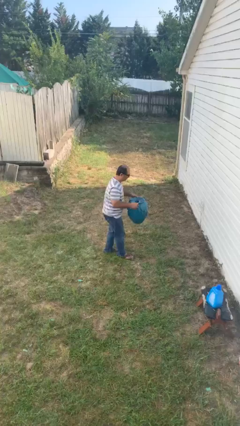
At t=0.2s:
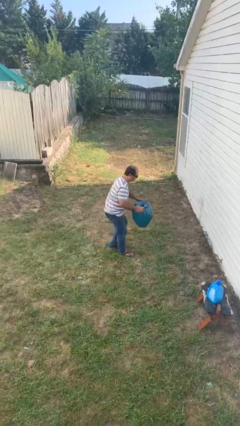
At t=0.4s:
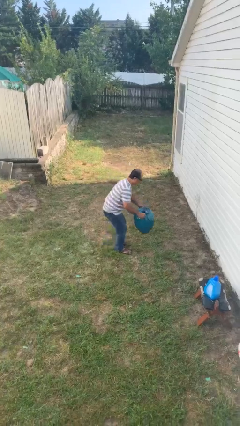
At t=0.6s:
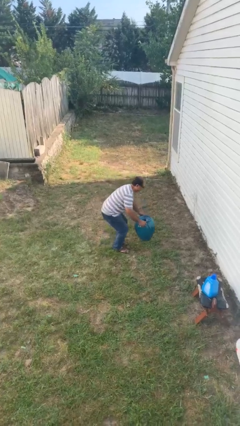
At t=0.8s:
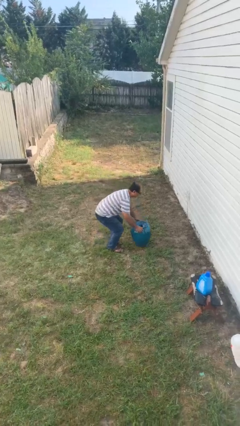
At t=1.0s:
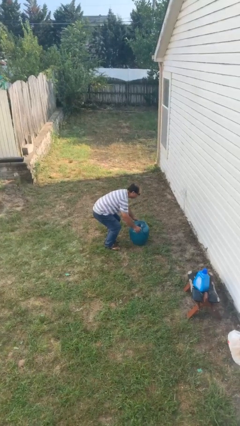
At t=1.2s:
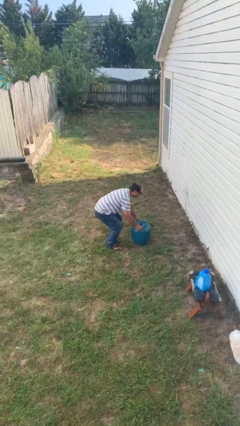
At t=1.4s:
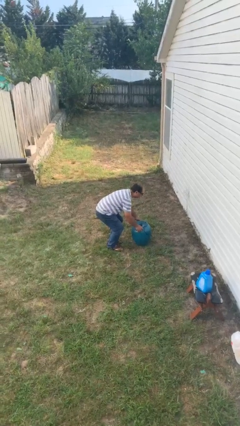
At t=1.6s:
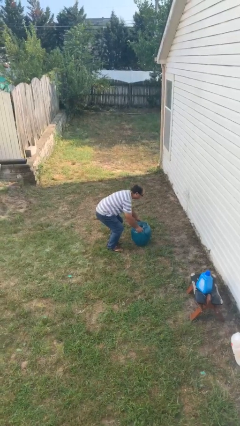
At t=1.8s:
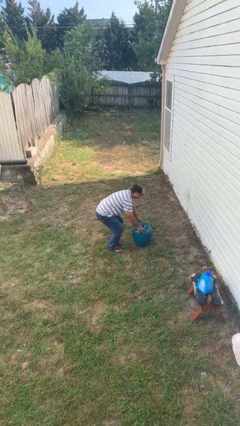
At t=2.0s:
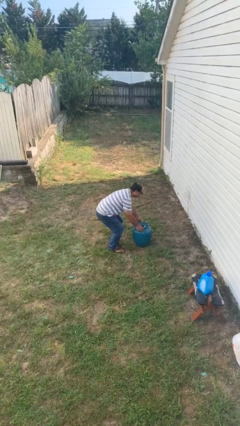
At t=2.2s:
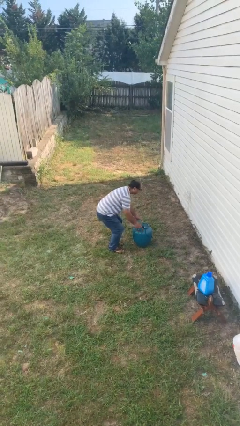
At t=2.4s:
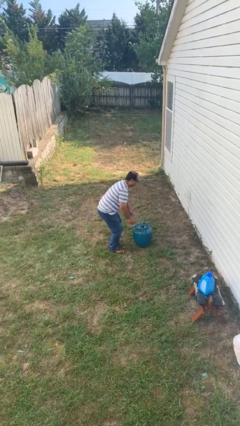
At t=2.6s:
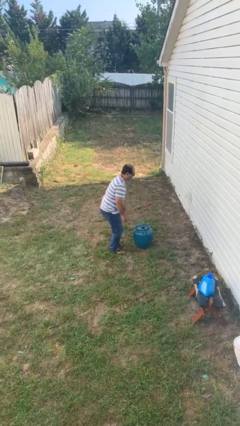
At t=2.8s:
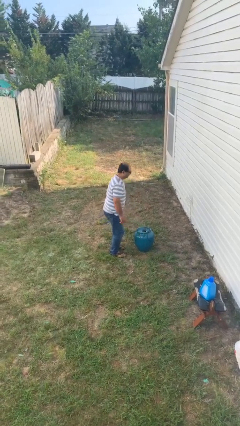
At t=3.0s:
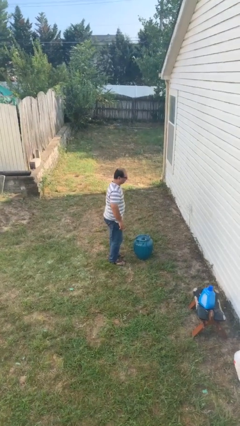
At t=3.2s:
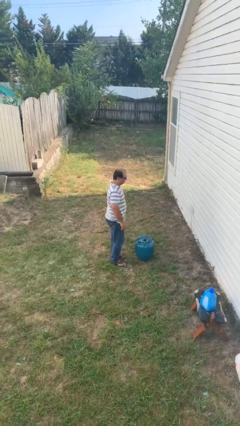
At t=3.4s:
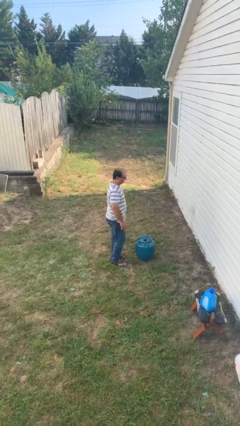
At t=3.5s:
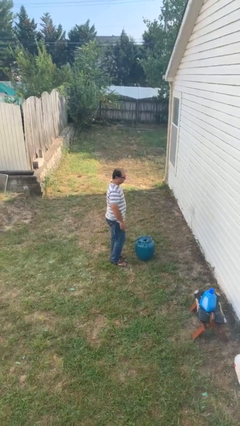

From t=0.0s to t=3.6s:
person puts down object on floor

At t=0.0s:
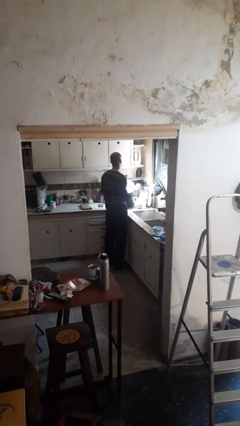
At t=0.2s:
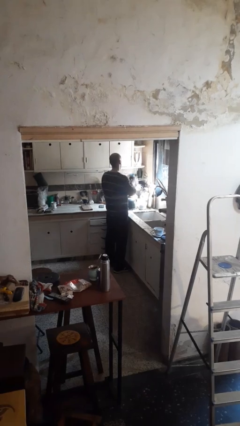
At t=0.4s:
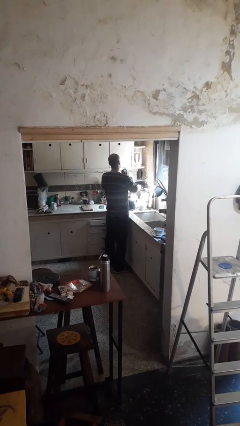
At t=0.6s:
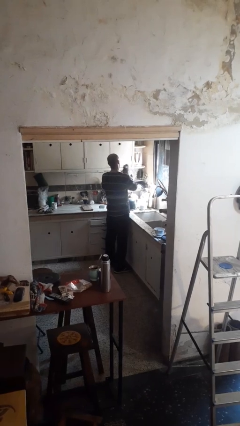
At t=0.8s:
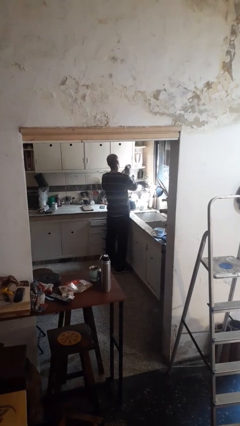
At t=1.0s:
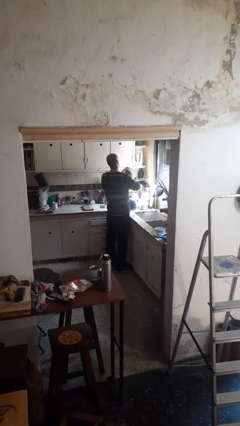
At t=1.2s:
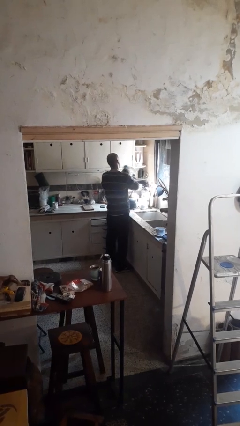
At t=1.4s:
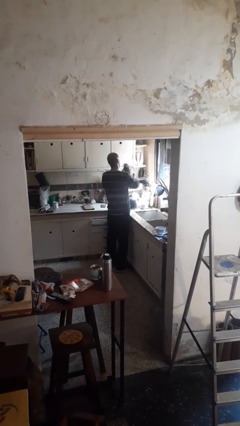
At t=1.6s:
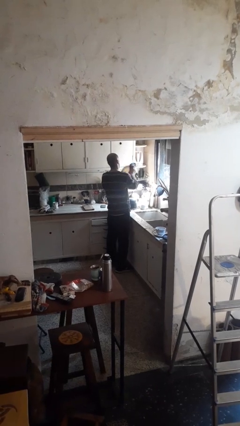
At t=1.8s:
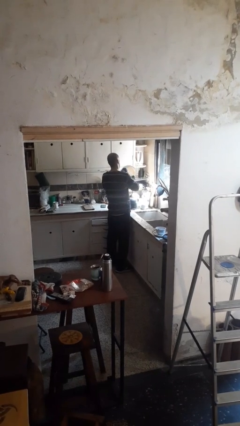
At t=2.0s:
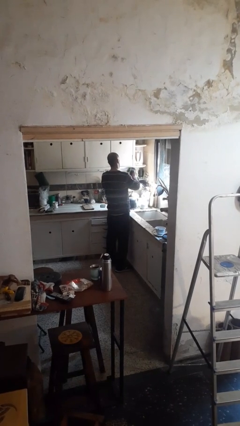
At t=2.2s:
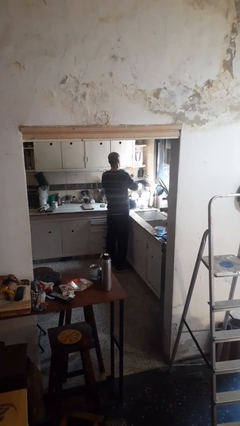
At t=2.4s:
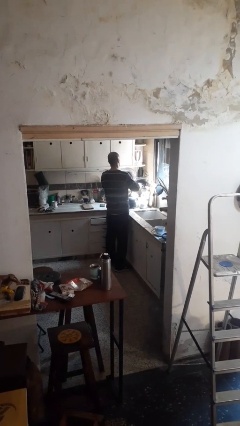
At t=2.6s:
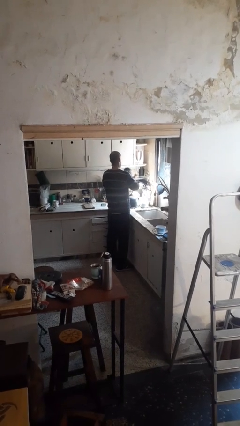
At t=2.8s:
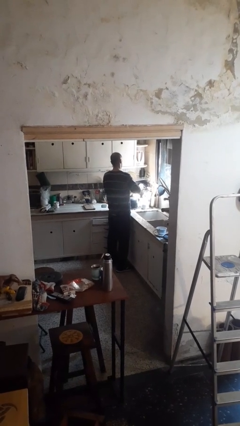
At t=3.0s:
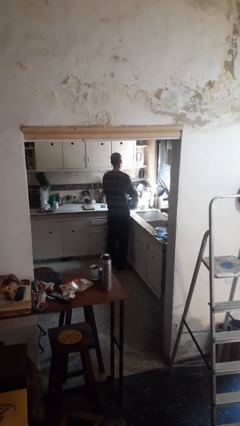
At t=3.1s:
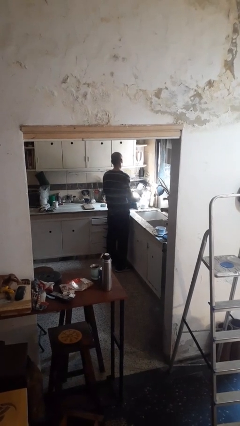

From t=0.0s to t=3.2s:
person dries dish

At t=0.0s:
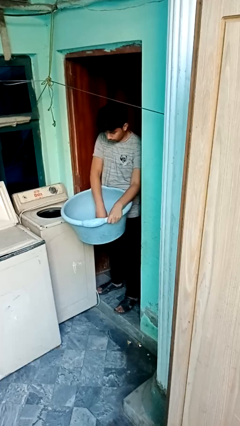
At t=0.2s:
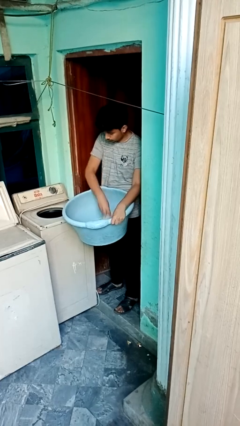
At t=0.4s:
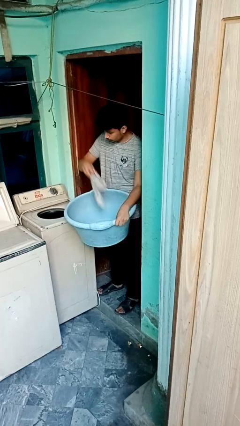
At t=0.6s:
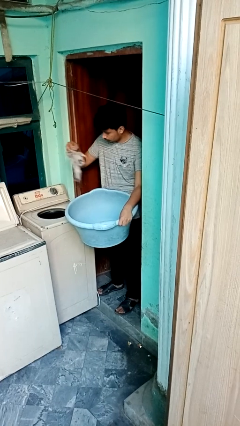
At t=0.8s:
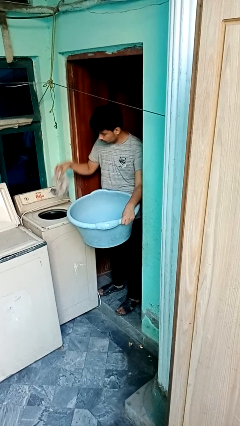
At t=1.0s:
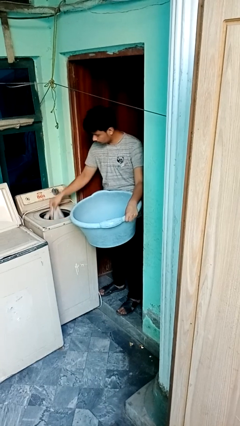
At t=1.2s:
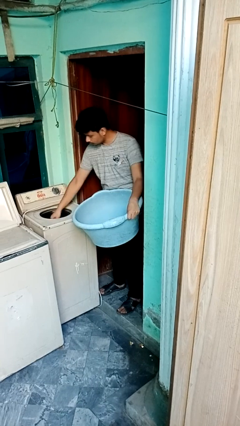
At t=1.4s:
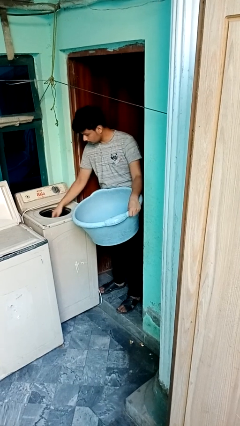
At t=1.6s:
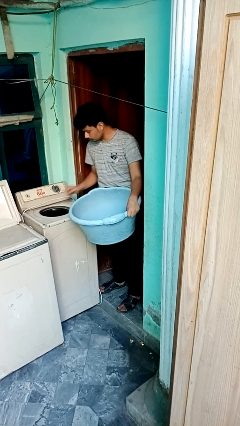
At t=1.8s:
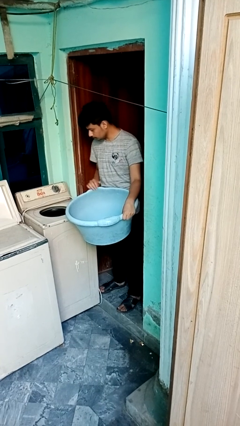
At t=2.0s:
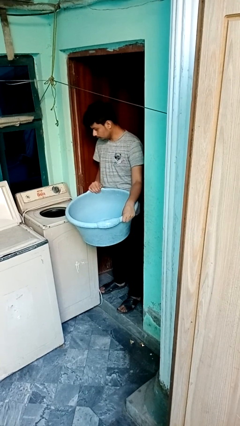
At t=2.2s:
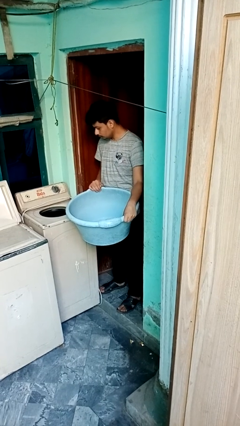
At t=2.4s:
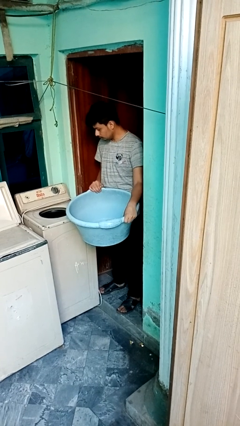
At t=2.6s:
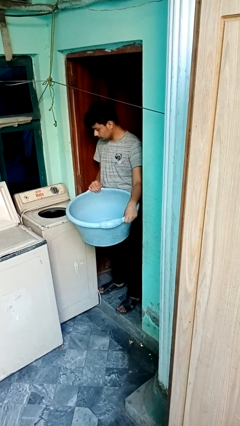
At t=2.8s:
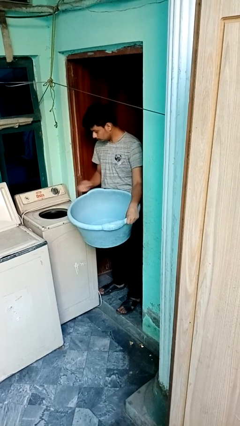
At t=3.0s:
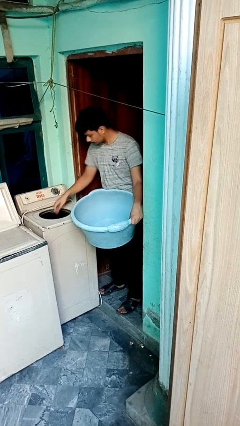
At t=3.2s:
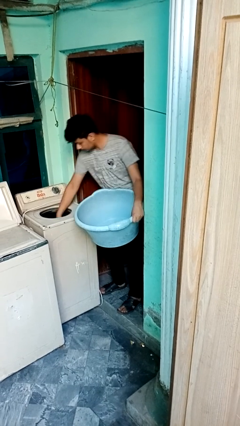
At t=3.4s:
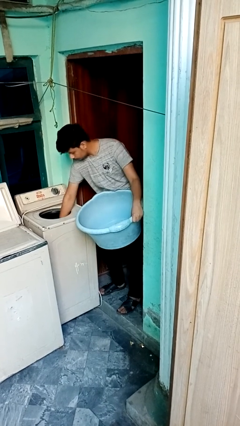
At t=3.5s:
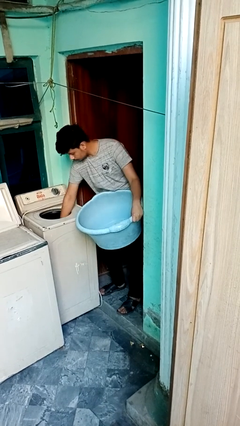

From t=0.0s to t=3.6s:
person loads dryer

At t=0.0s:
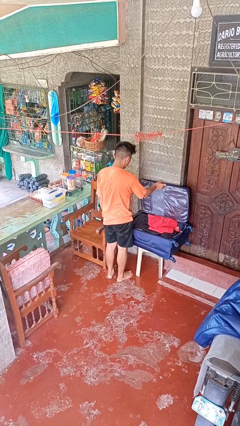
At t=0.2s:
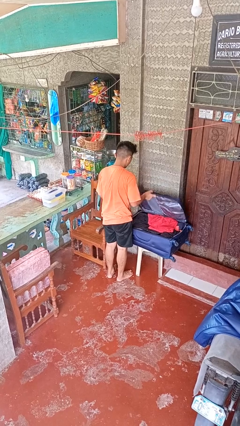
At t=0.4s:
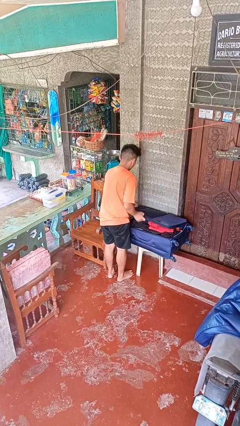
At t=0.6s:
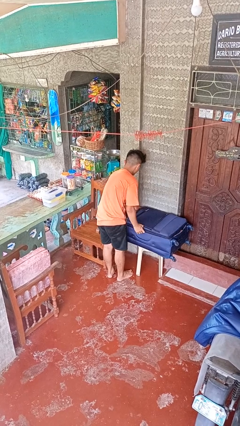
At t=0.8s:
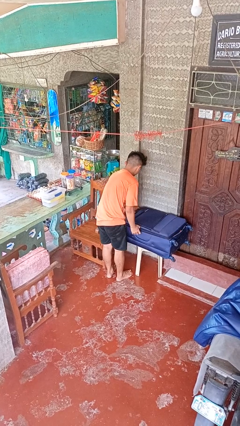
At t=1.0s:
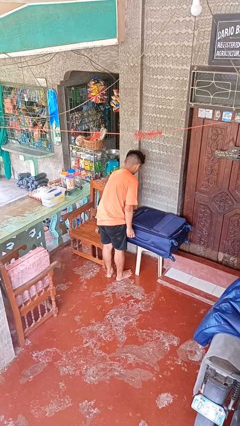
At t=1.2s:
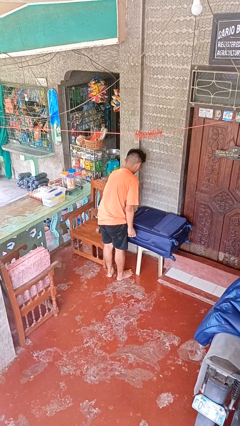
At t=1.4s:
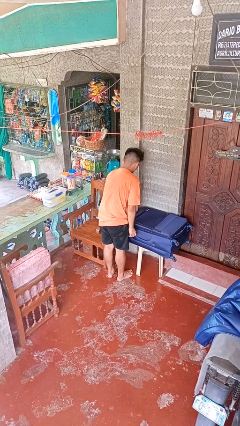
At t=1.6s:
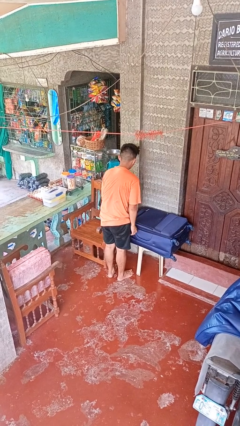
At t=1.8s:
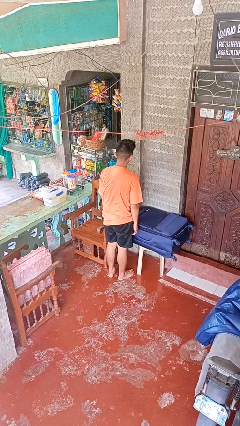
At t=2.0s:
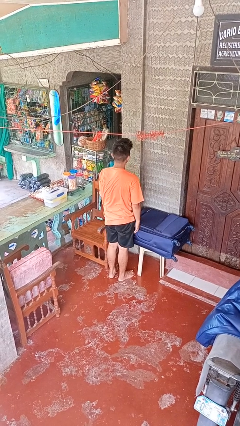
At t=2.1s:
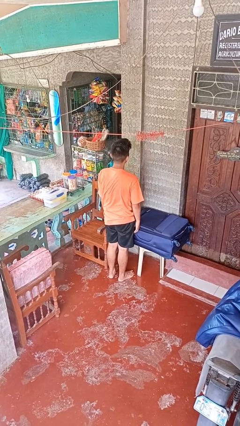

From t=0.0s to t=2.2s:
person closes suitcase

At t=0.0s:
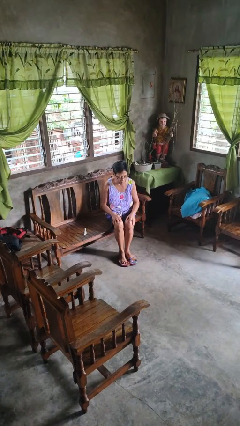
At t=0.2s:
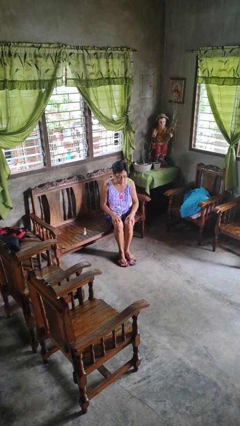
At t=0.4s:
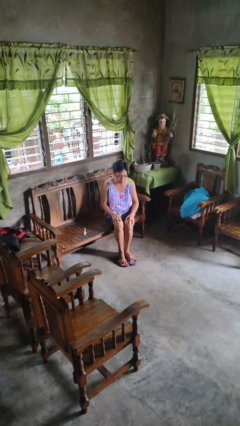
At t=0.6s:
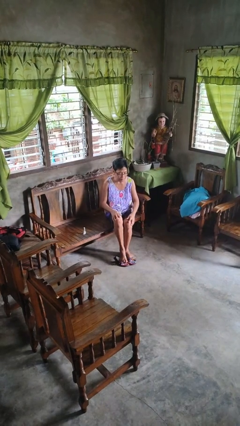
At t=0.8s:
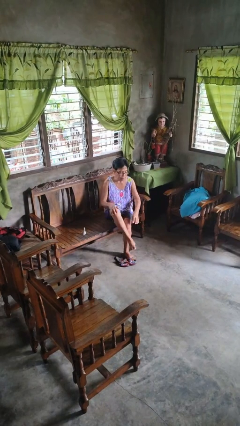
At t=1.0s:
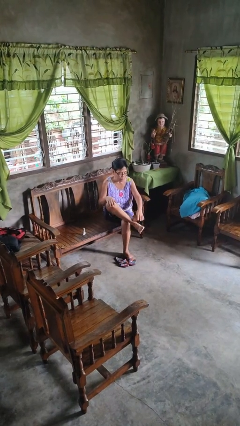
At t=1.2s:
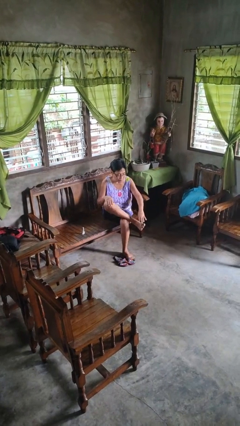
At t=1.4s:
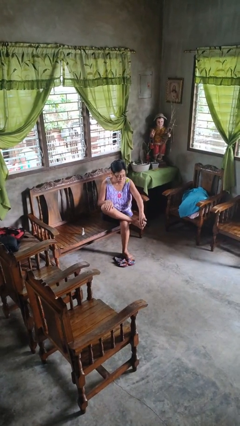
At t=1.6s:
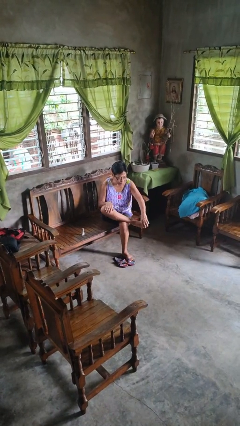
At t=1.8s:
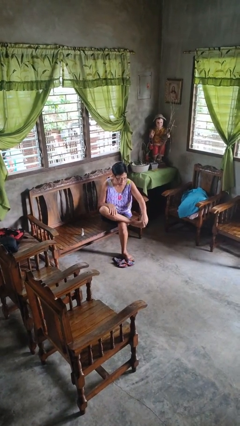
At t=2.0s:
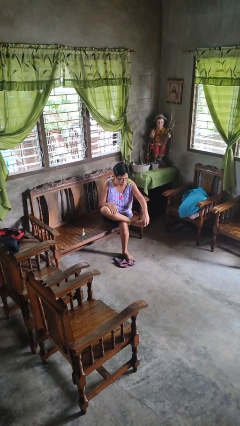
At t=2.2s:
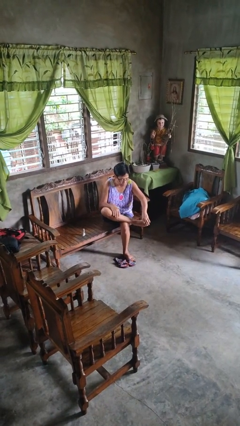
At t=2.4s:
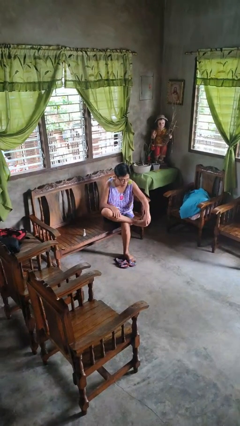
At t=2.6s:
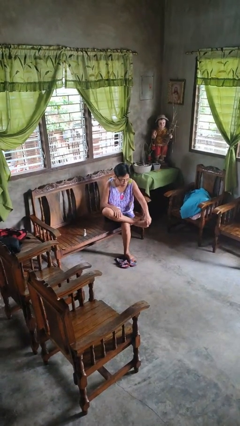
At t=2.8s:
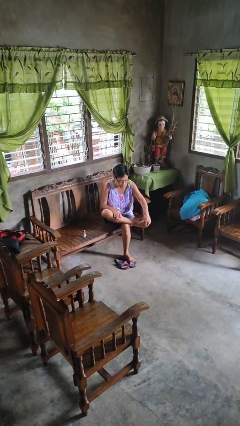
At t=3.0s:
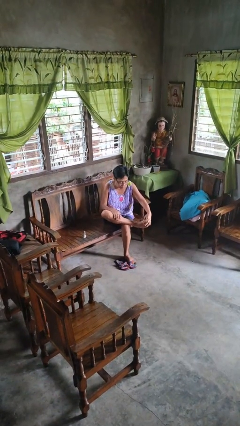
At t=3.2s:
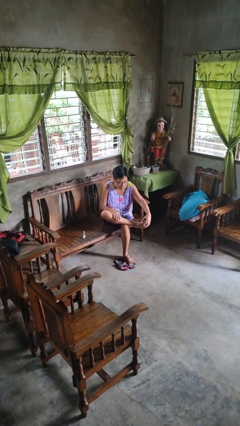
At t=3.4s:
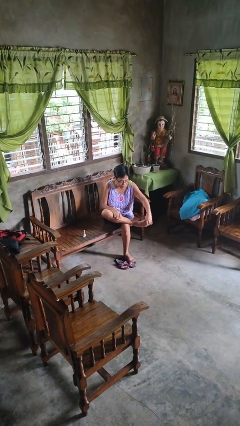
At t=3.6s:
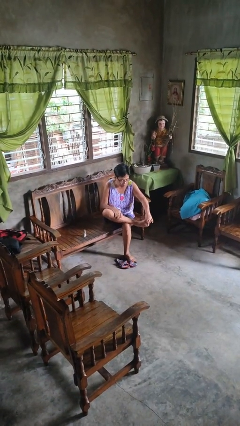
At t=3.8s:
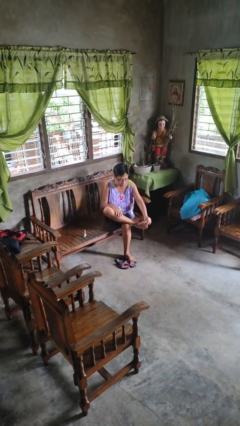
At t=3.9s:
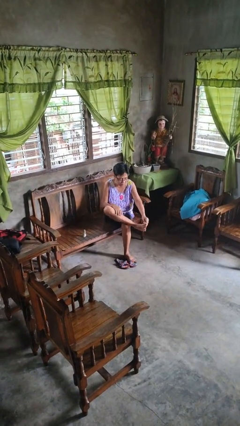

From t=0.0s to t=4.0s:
person rubs foot

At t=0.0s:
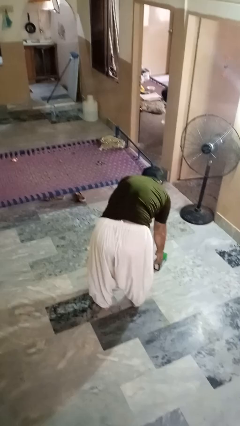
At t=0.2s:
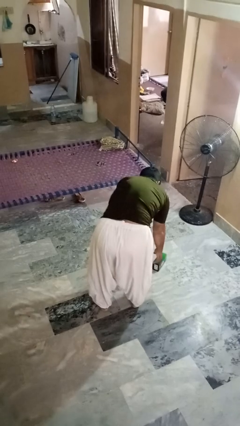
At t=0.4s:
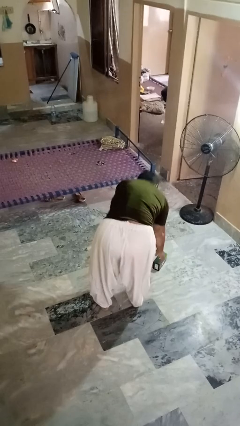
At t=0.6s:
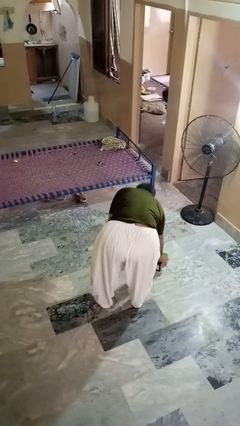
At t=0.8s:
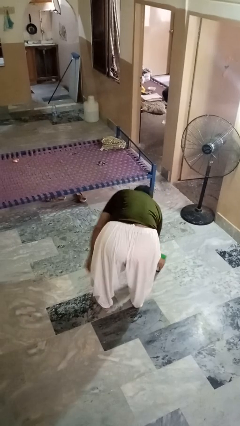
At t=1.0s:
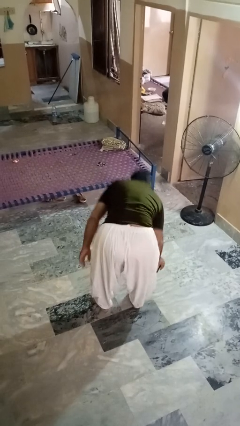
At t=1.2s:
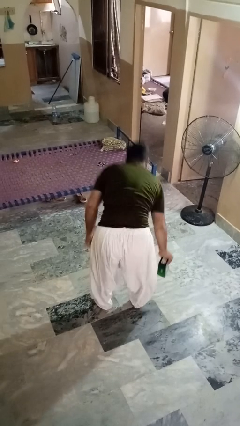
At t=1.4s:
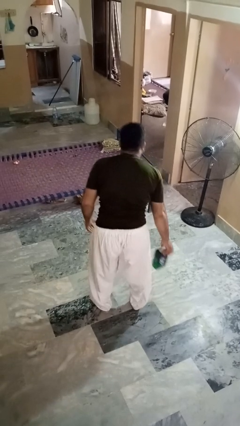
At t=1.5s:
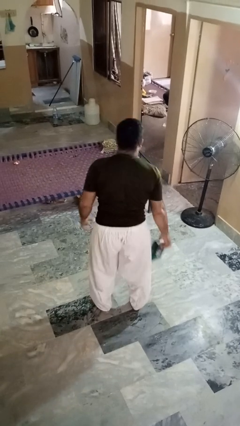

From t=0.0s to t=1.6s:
person picks up object from floor
